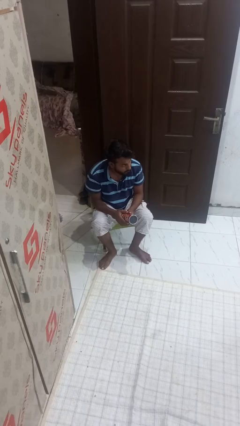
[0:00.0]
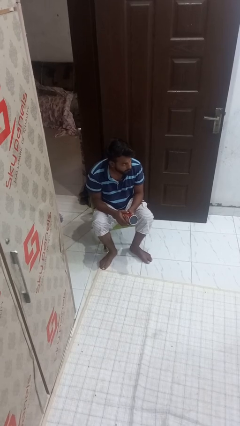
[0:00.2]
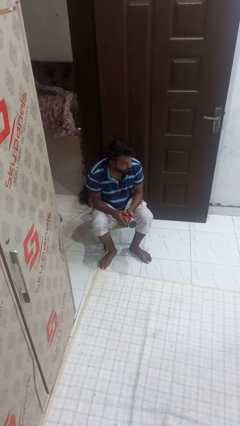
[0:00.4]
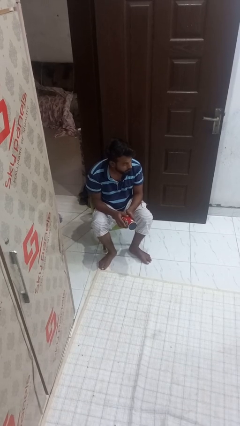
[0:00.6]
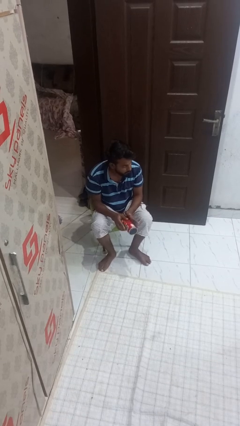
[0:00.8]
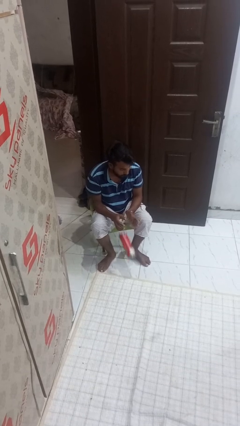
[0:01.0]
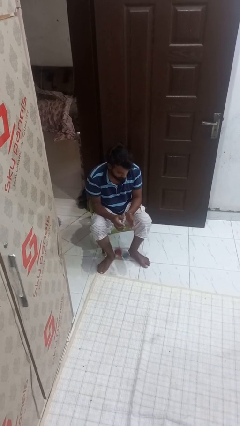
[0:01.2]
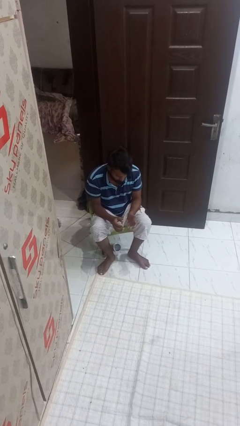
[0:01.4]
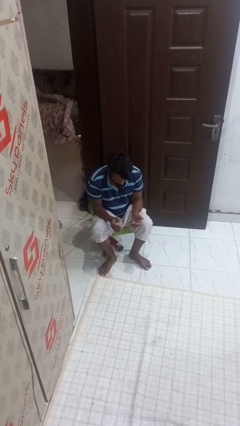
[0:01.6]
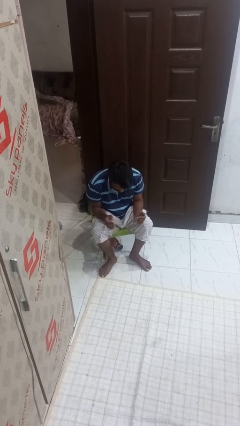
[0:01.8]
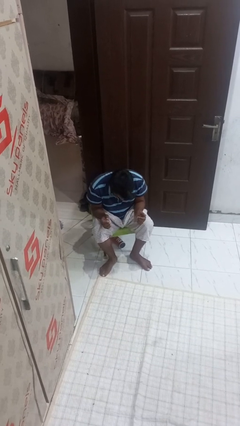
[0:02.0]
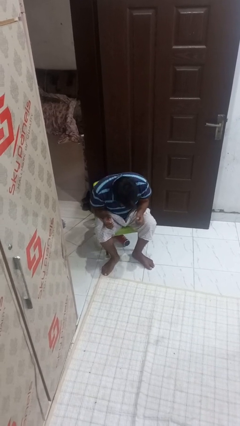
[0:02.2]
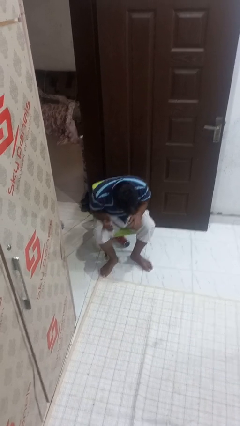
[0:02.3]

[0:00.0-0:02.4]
person drops object

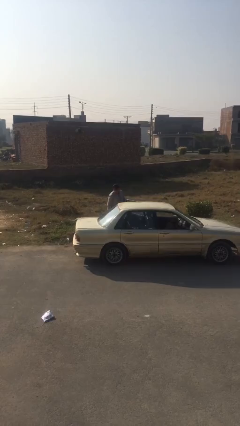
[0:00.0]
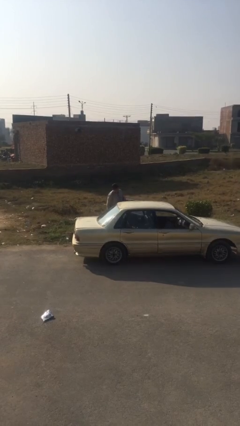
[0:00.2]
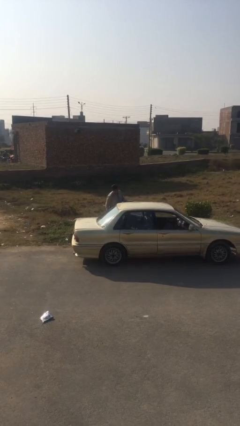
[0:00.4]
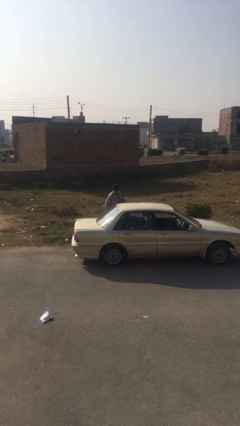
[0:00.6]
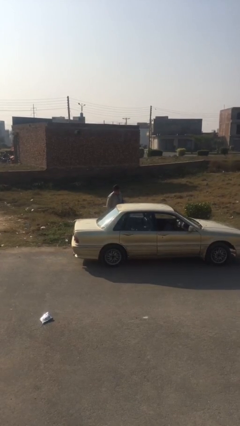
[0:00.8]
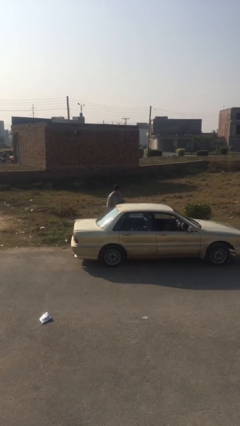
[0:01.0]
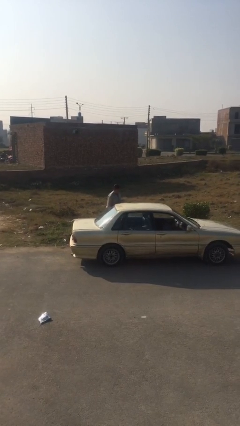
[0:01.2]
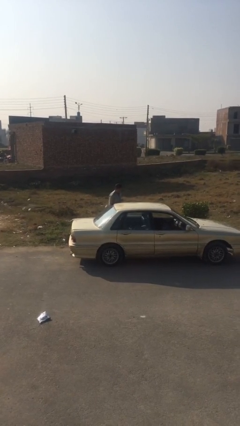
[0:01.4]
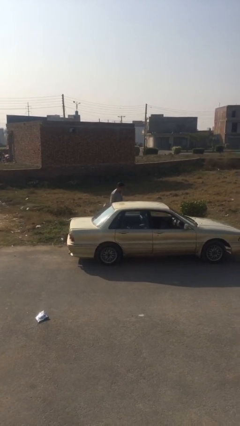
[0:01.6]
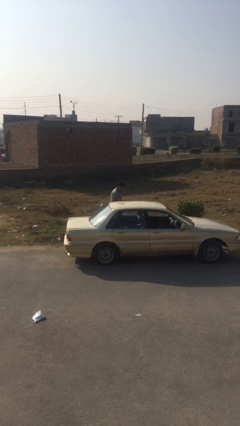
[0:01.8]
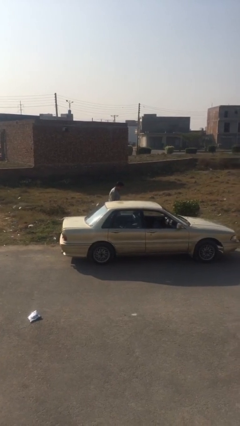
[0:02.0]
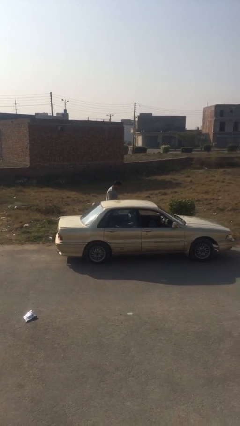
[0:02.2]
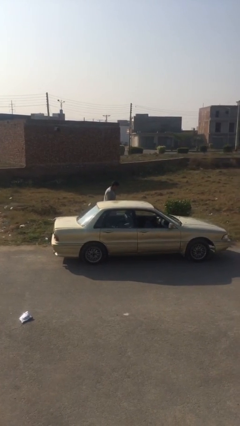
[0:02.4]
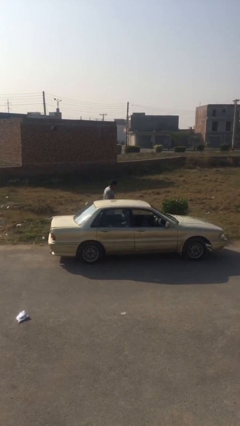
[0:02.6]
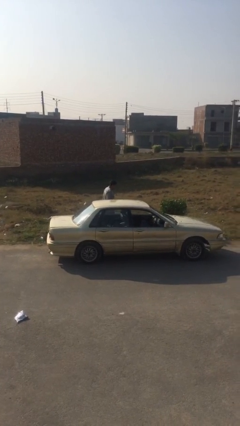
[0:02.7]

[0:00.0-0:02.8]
person closes car door

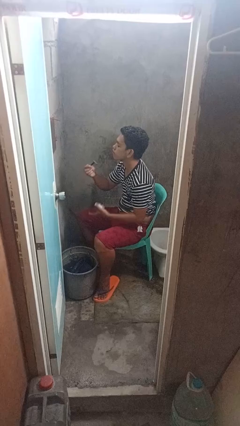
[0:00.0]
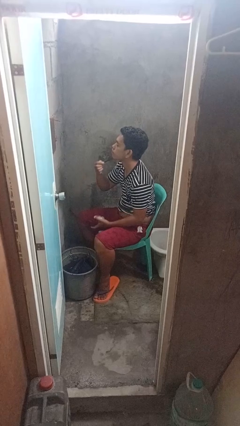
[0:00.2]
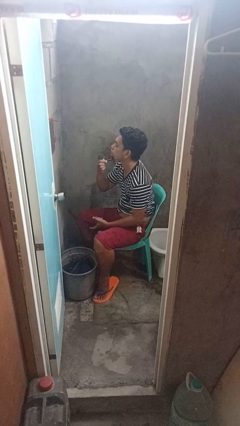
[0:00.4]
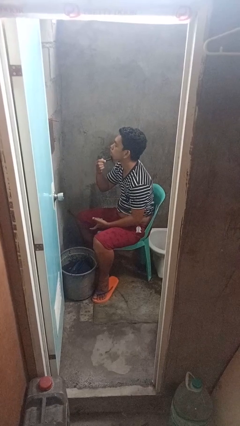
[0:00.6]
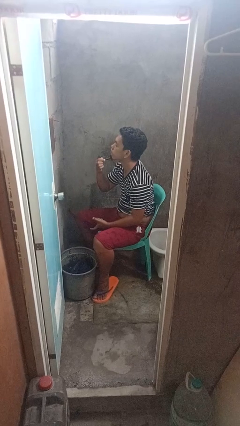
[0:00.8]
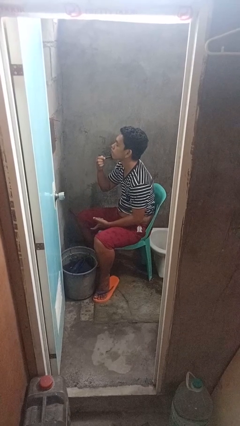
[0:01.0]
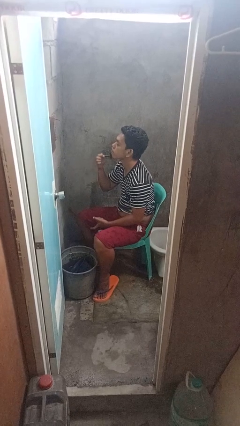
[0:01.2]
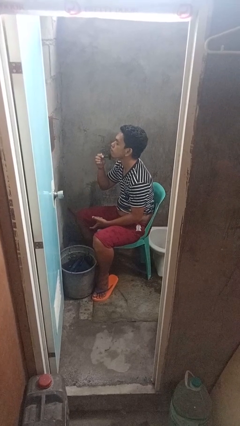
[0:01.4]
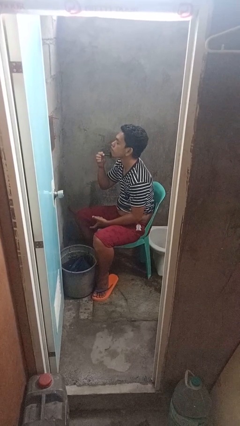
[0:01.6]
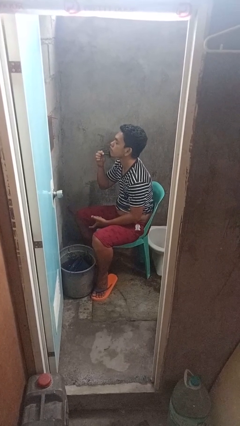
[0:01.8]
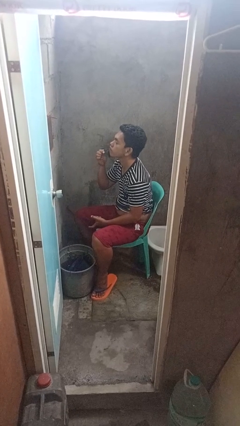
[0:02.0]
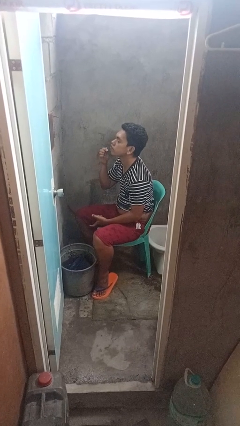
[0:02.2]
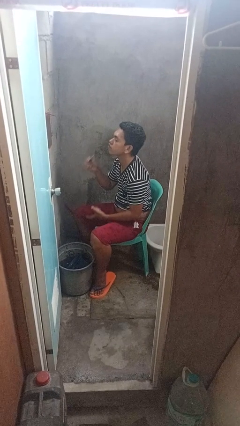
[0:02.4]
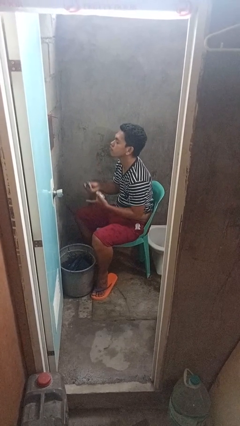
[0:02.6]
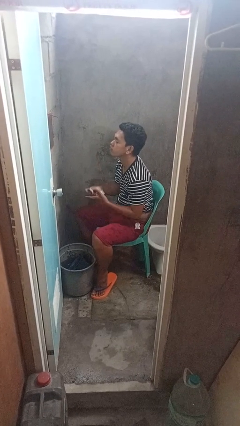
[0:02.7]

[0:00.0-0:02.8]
person shaves face

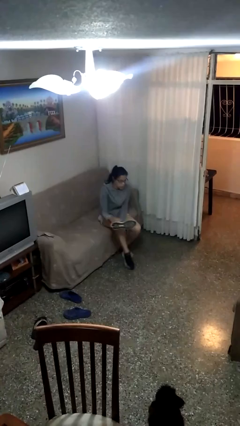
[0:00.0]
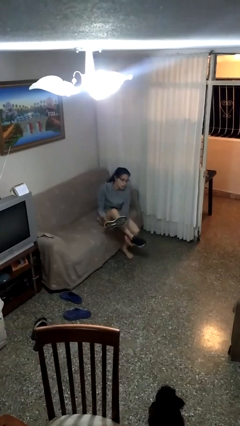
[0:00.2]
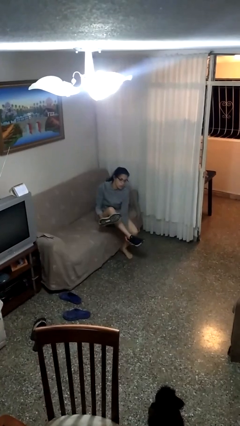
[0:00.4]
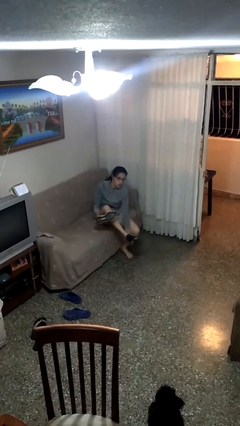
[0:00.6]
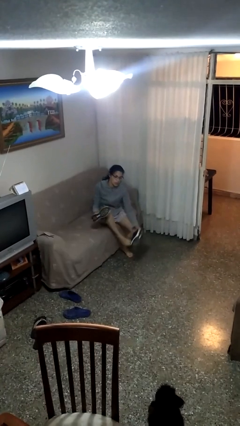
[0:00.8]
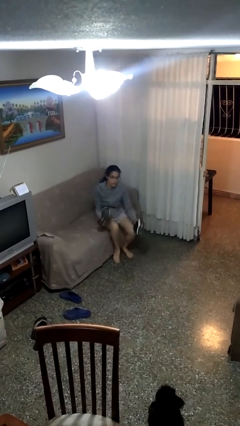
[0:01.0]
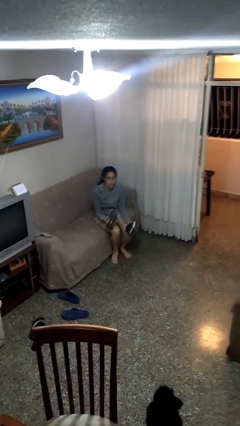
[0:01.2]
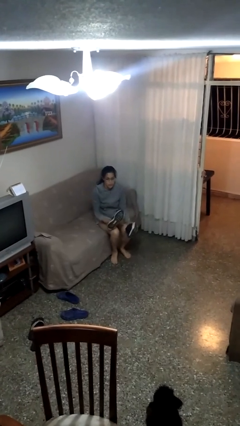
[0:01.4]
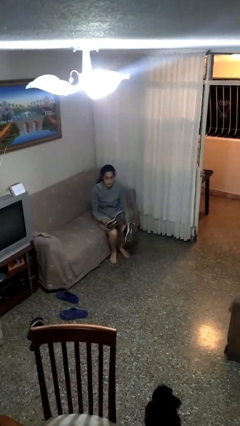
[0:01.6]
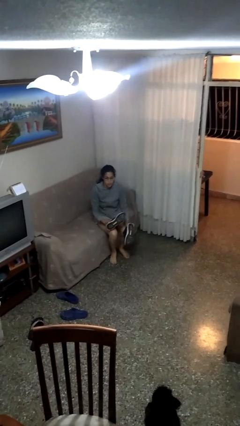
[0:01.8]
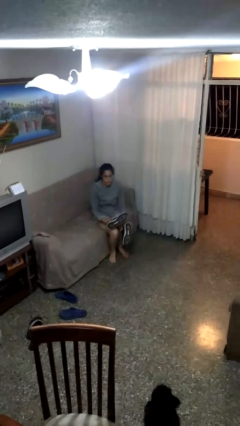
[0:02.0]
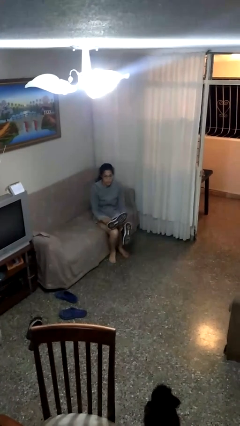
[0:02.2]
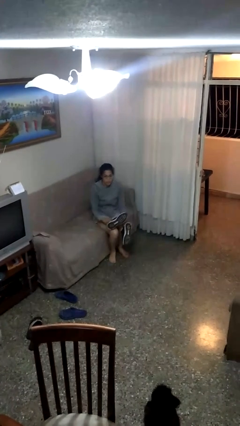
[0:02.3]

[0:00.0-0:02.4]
person takes off shoes

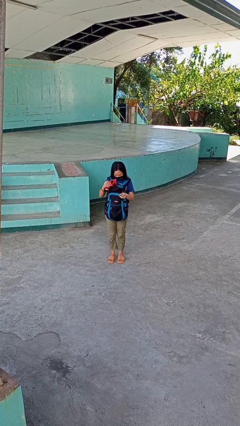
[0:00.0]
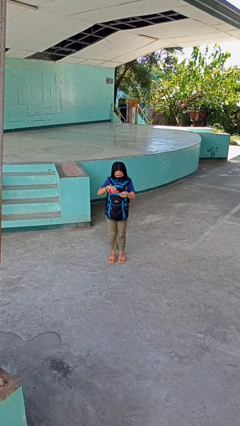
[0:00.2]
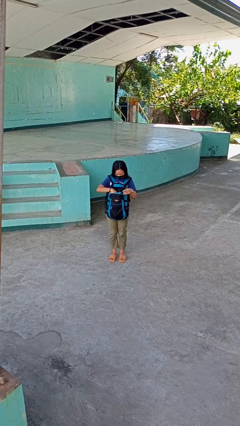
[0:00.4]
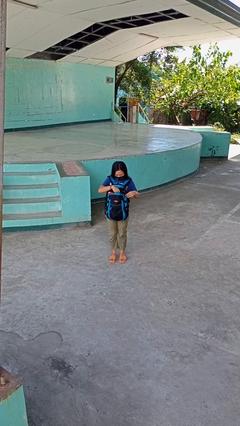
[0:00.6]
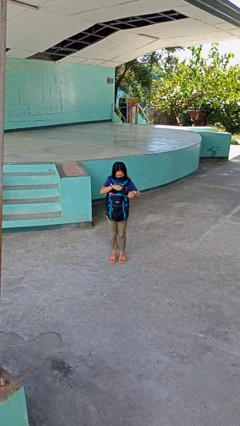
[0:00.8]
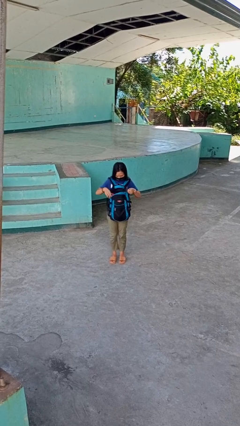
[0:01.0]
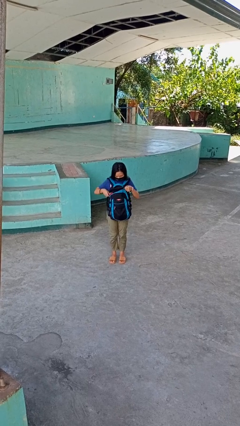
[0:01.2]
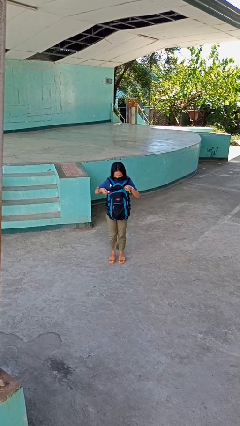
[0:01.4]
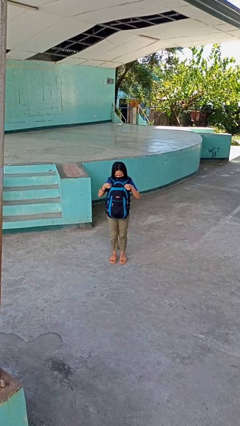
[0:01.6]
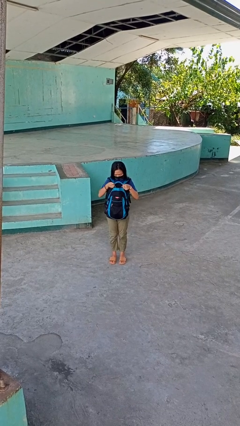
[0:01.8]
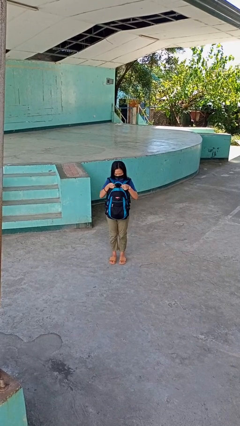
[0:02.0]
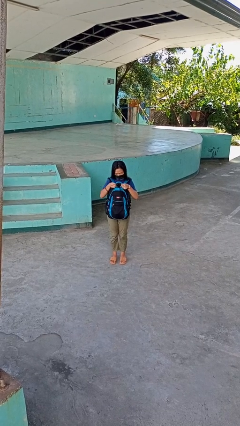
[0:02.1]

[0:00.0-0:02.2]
person puts object into backpack

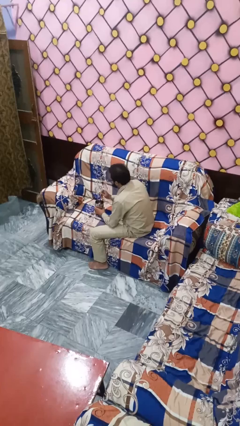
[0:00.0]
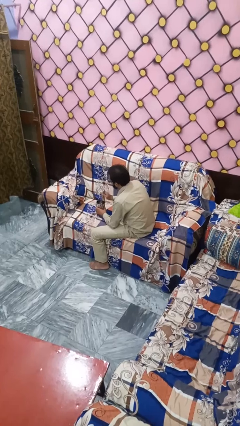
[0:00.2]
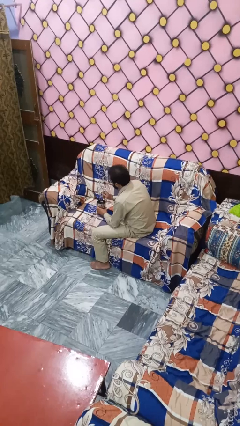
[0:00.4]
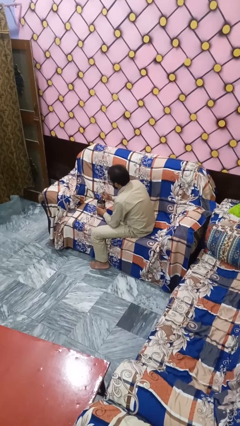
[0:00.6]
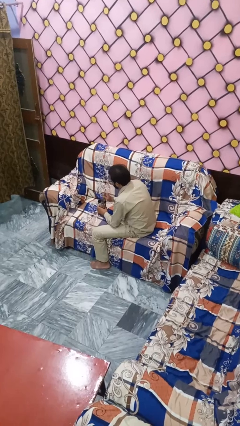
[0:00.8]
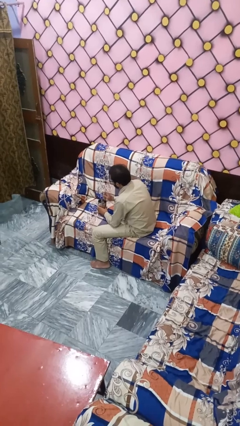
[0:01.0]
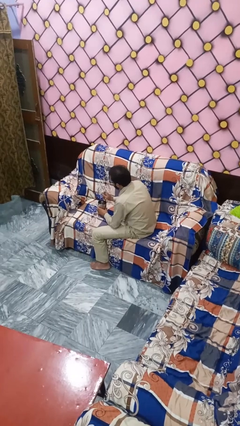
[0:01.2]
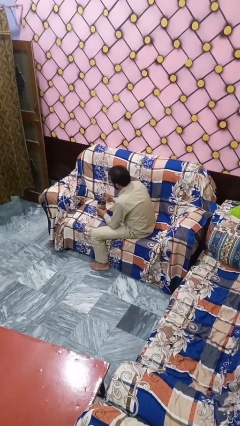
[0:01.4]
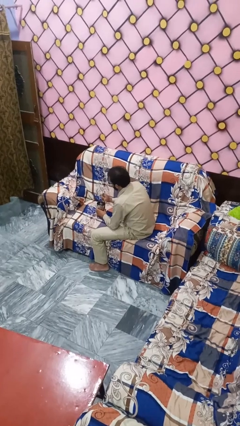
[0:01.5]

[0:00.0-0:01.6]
person stirs mug

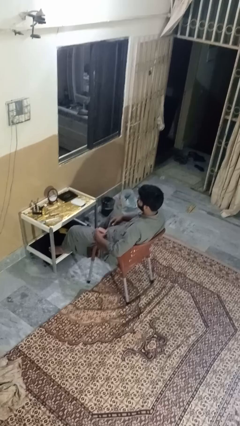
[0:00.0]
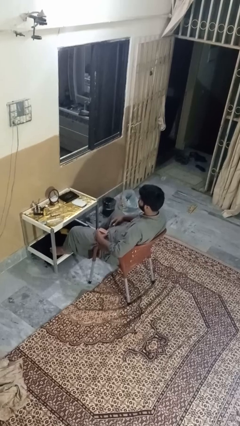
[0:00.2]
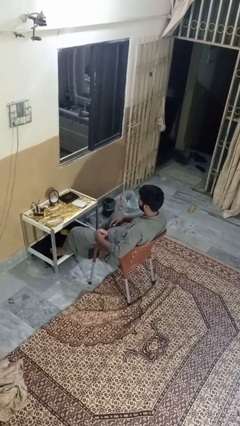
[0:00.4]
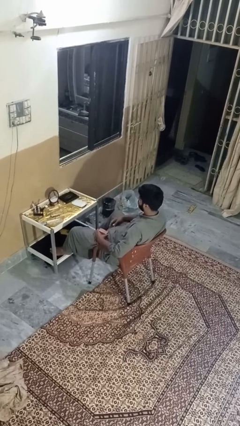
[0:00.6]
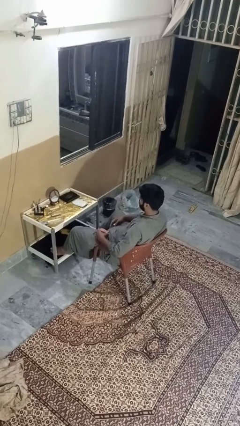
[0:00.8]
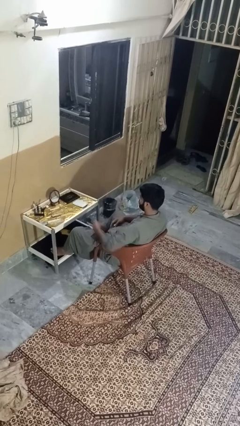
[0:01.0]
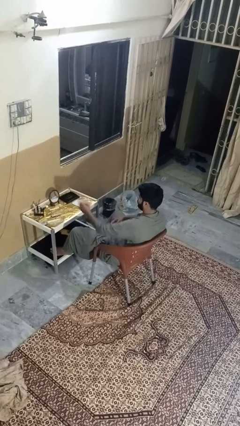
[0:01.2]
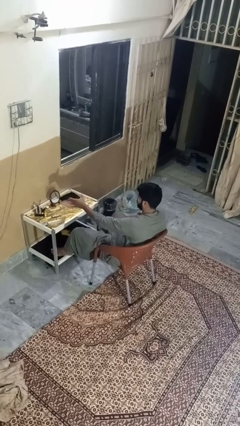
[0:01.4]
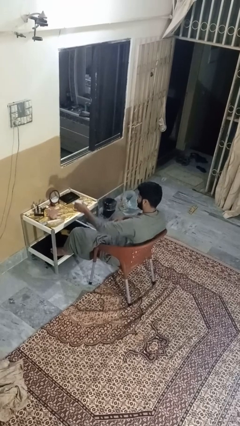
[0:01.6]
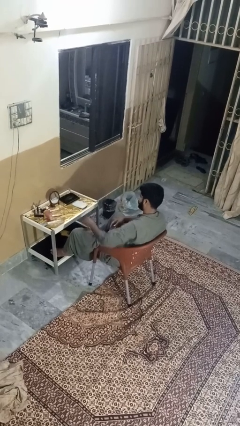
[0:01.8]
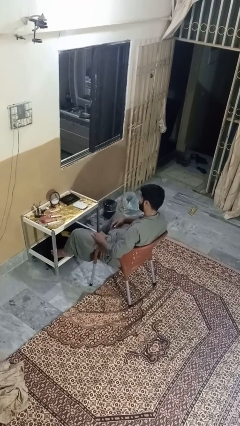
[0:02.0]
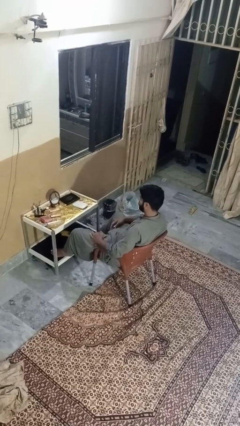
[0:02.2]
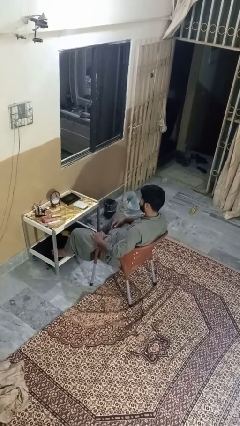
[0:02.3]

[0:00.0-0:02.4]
person throws object on table

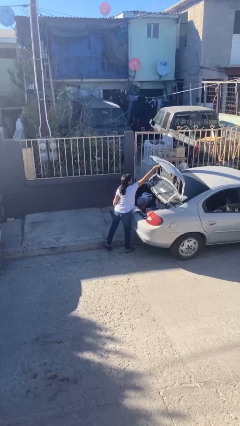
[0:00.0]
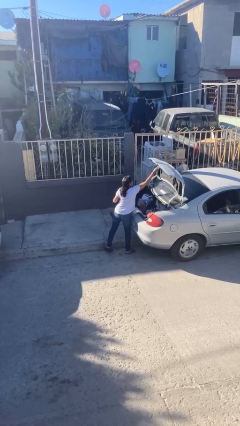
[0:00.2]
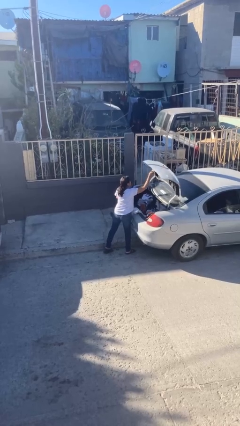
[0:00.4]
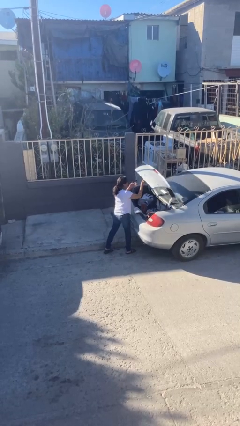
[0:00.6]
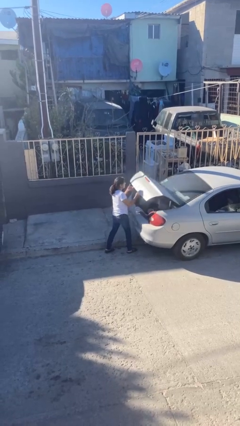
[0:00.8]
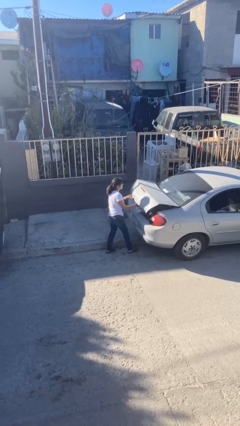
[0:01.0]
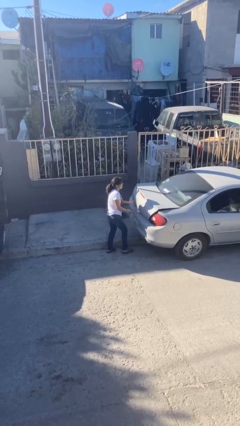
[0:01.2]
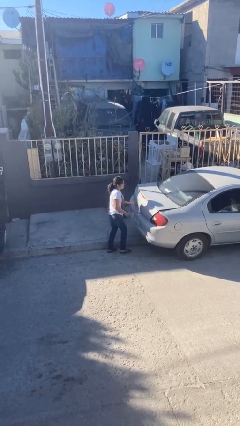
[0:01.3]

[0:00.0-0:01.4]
person closes car trunk
